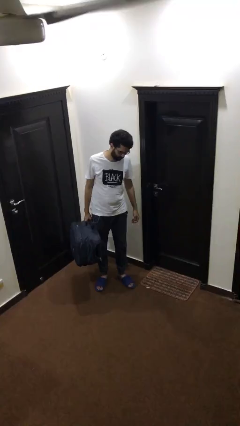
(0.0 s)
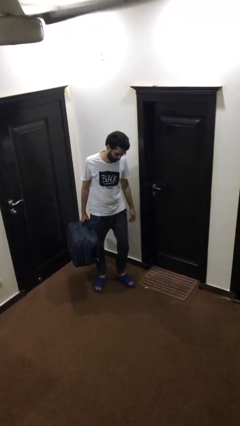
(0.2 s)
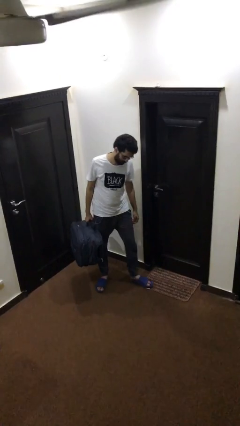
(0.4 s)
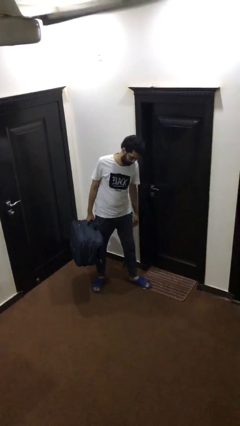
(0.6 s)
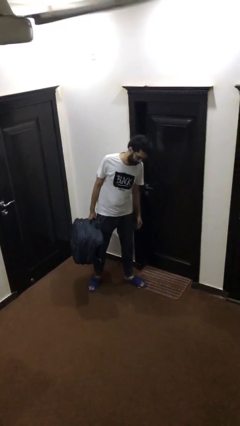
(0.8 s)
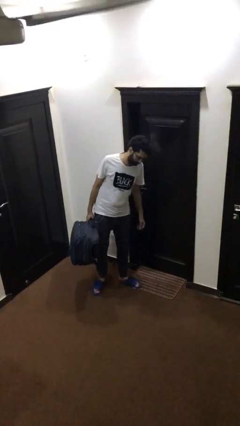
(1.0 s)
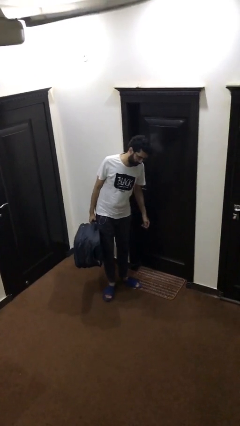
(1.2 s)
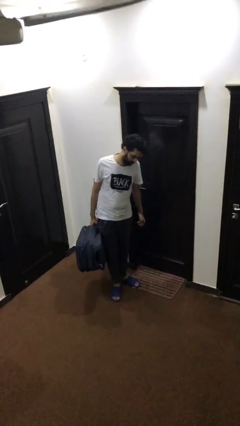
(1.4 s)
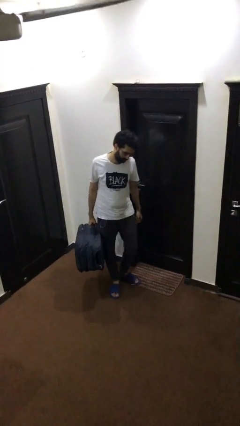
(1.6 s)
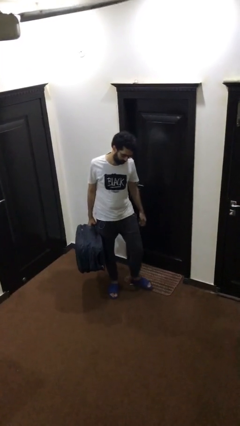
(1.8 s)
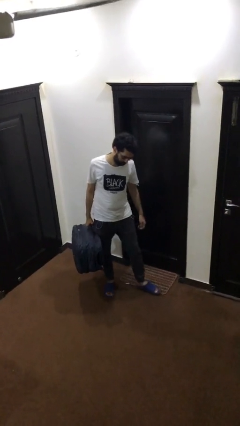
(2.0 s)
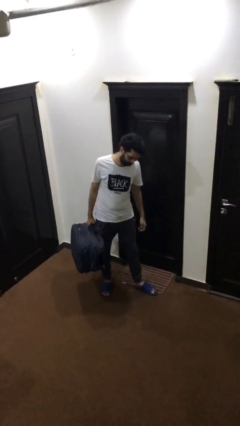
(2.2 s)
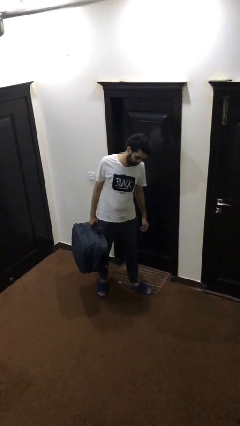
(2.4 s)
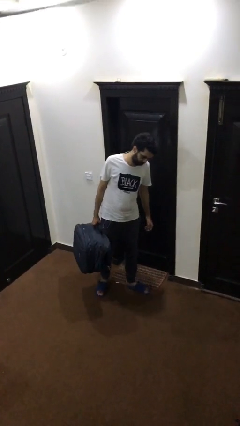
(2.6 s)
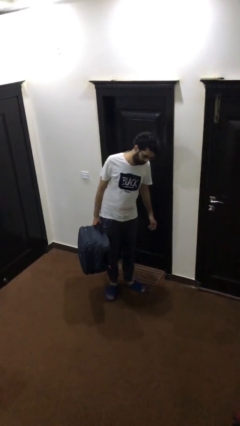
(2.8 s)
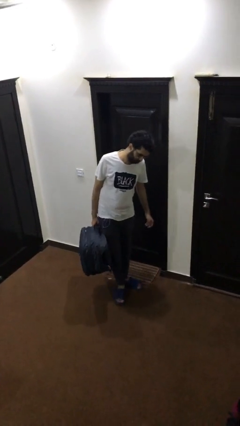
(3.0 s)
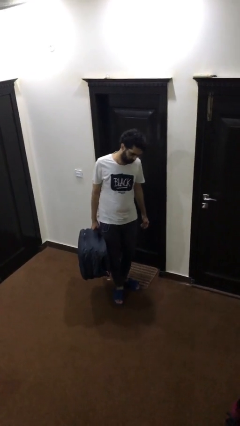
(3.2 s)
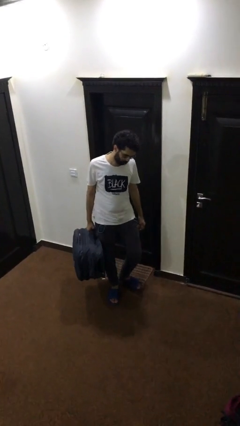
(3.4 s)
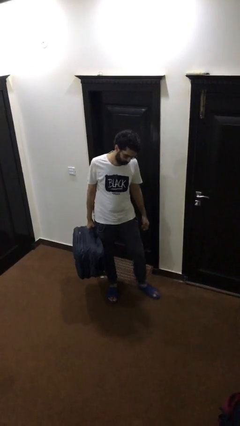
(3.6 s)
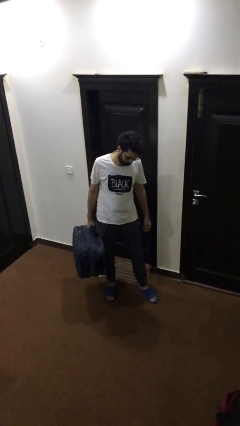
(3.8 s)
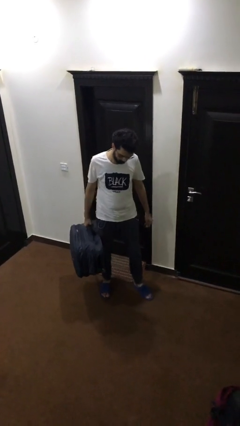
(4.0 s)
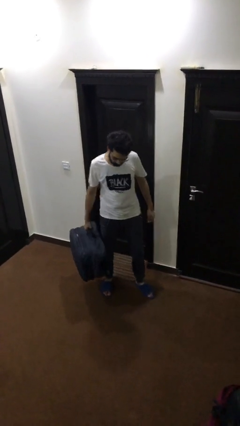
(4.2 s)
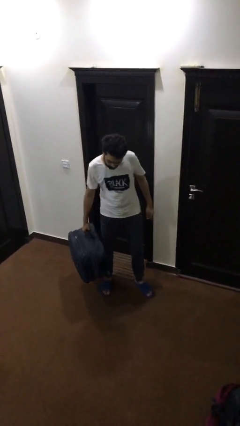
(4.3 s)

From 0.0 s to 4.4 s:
person carries heavy object

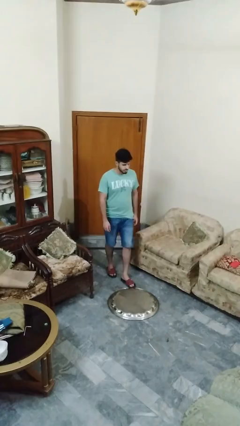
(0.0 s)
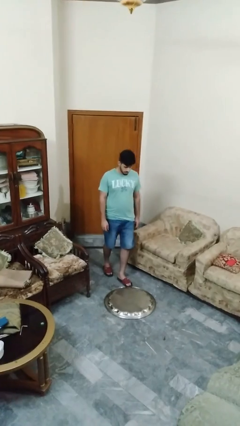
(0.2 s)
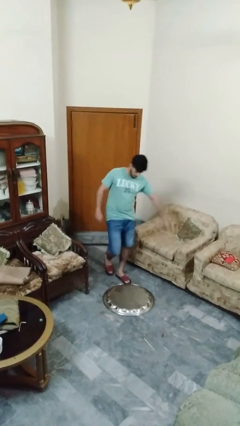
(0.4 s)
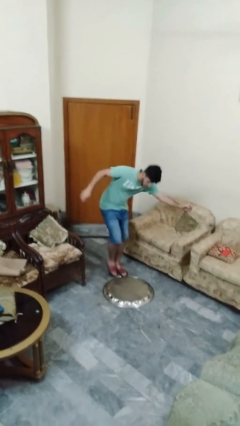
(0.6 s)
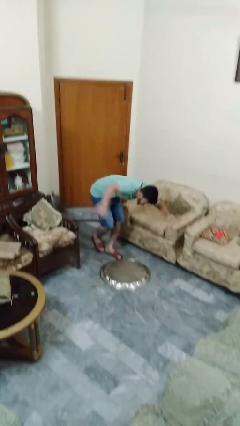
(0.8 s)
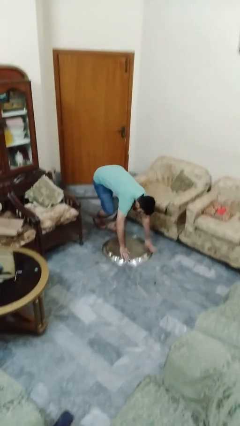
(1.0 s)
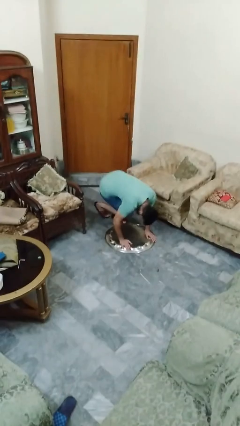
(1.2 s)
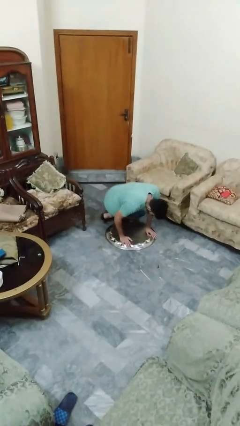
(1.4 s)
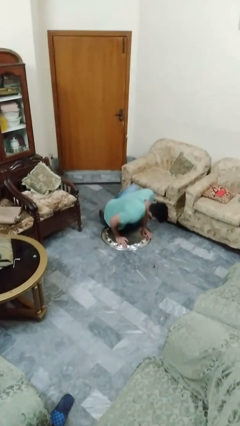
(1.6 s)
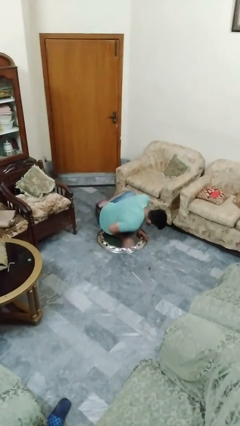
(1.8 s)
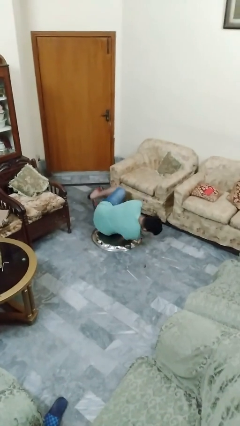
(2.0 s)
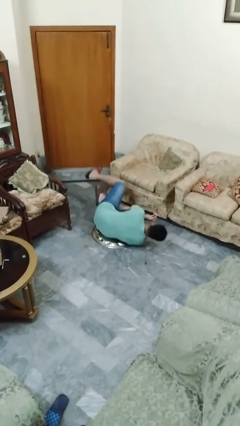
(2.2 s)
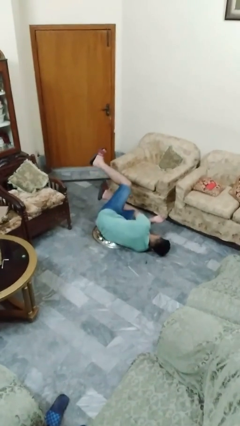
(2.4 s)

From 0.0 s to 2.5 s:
person trips on object on floor

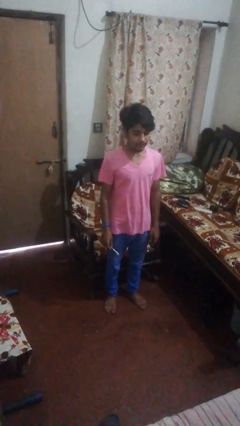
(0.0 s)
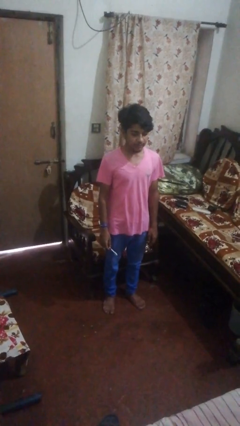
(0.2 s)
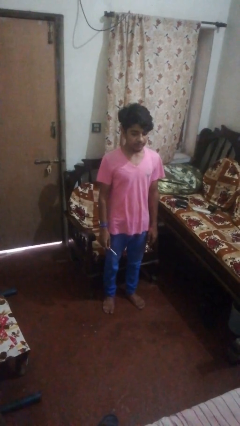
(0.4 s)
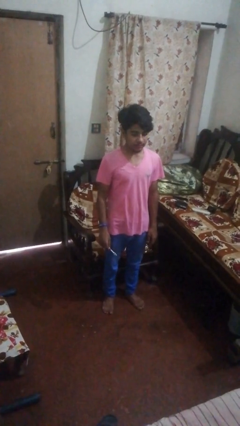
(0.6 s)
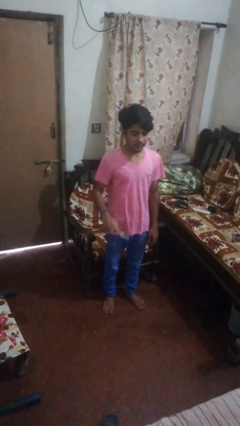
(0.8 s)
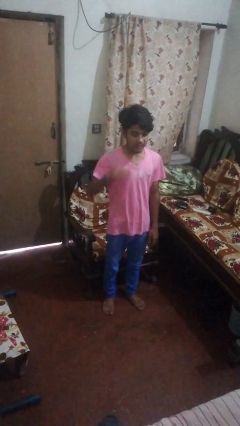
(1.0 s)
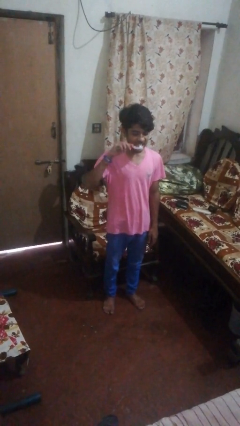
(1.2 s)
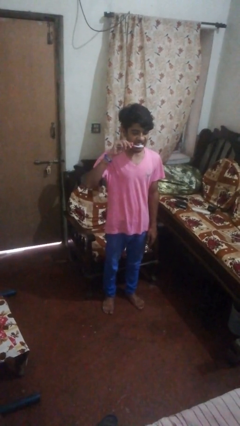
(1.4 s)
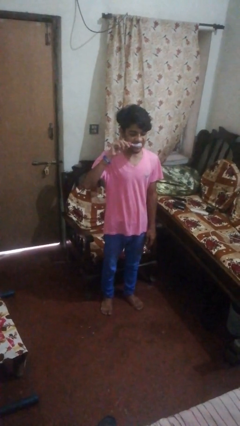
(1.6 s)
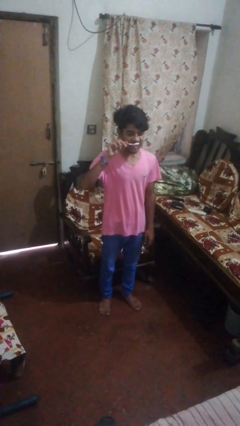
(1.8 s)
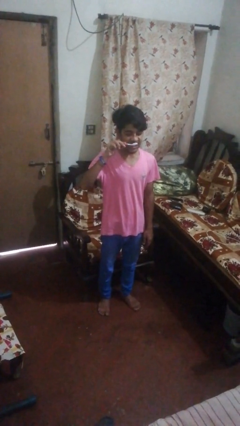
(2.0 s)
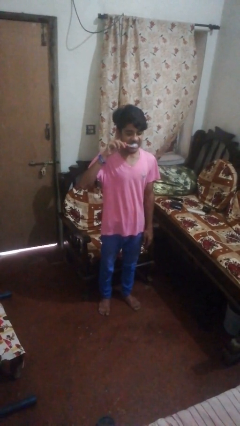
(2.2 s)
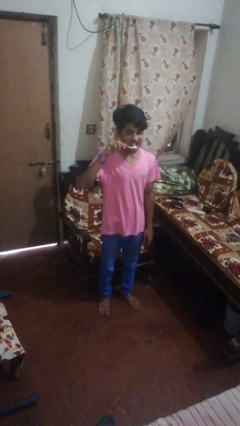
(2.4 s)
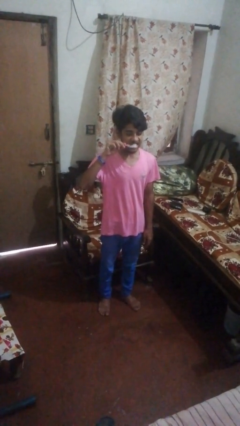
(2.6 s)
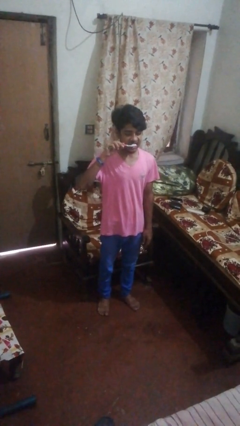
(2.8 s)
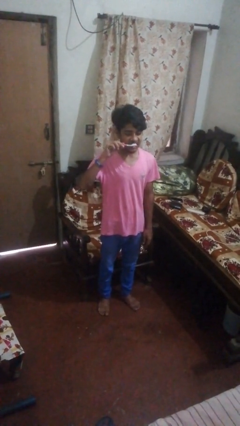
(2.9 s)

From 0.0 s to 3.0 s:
person brushes teeth

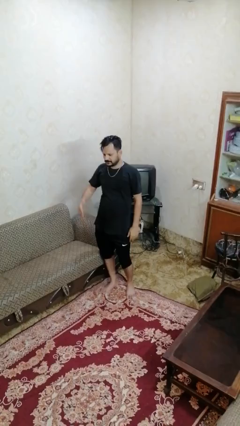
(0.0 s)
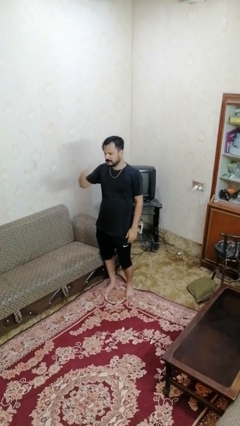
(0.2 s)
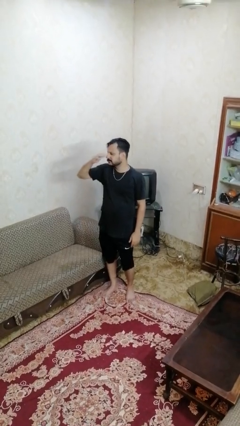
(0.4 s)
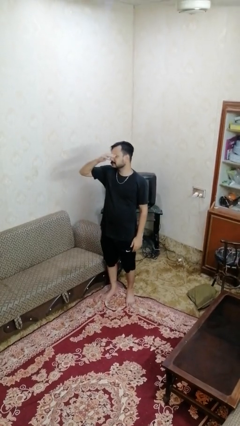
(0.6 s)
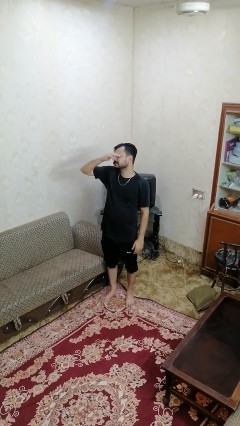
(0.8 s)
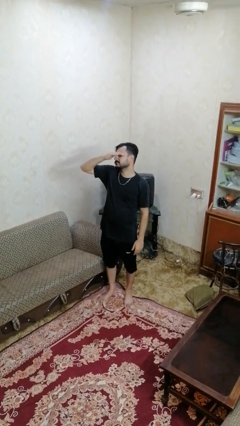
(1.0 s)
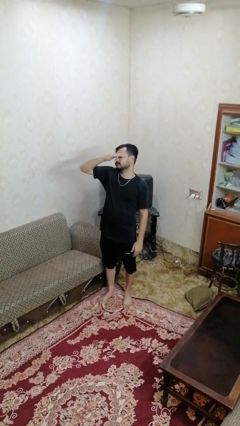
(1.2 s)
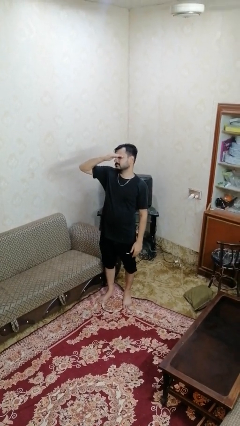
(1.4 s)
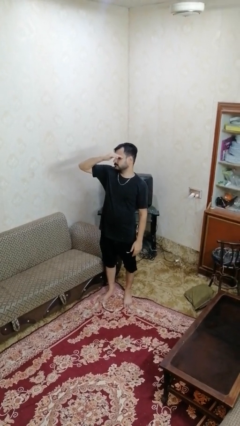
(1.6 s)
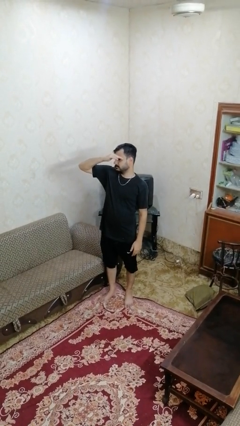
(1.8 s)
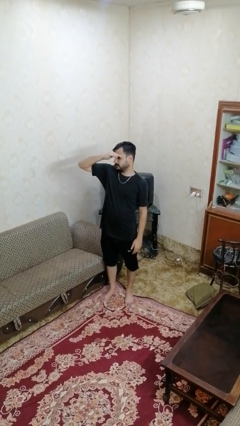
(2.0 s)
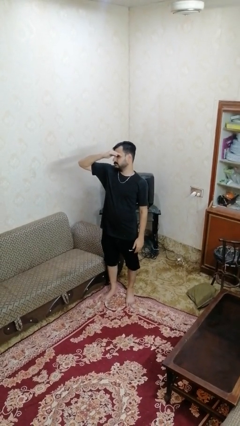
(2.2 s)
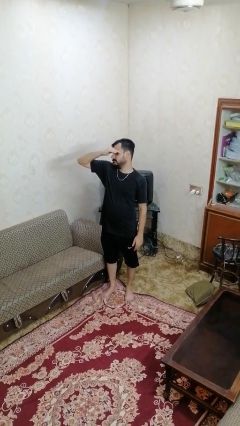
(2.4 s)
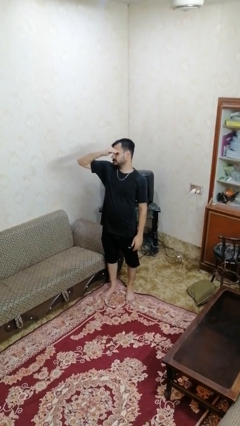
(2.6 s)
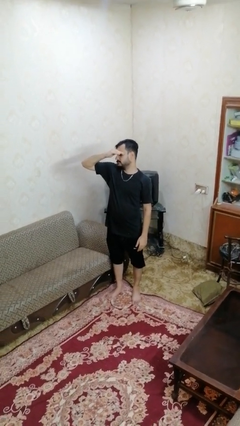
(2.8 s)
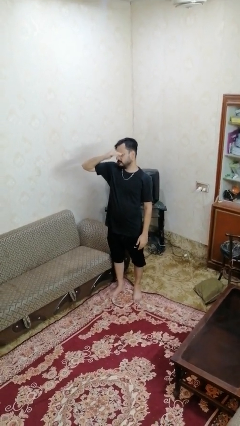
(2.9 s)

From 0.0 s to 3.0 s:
person shades eyes

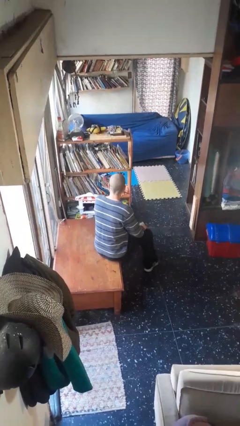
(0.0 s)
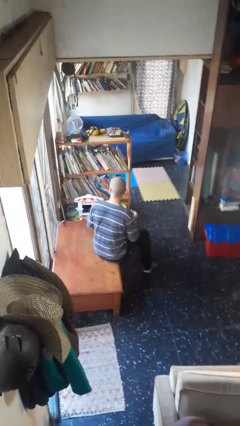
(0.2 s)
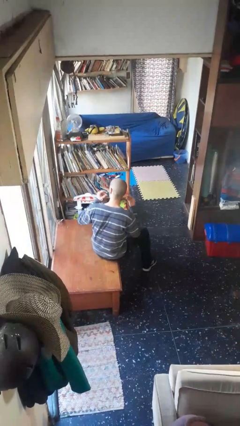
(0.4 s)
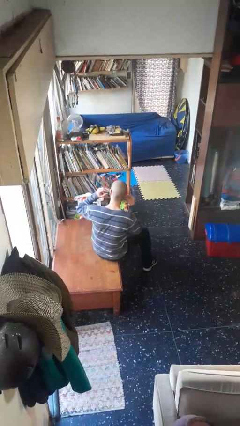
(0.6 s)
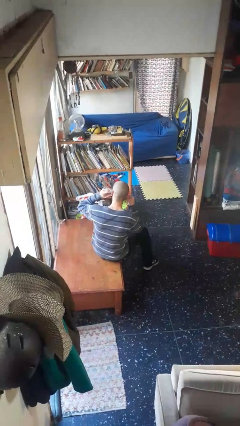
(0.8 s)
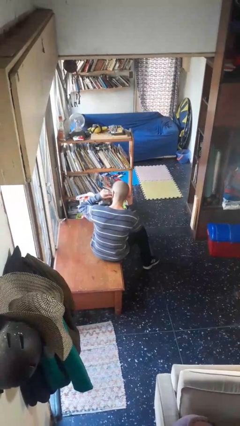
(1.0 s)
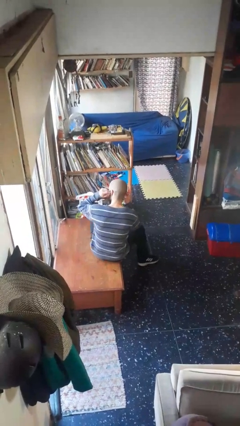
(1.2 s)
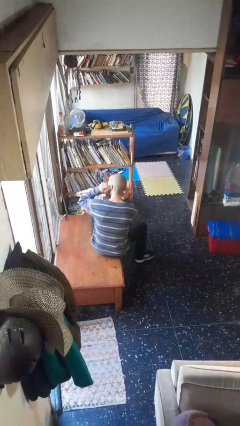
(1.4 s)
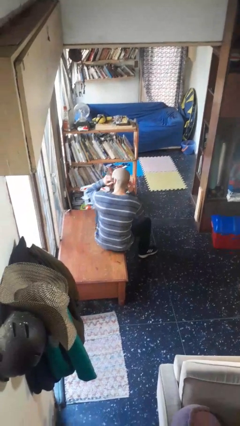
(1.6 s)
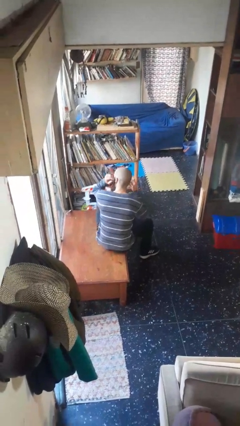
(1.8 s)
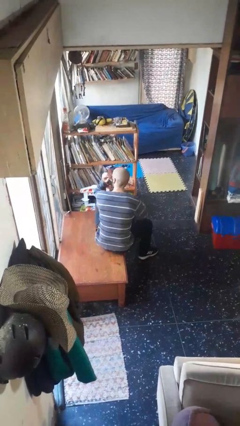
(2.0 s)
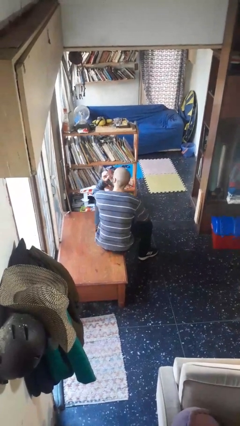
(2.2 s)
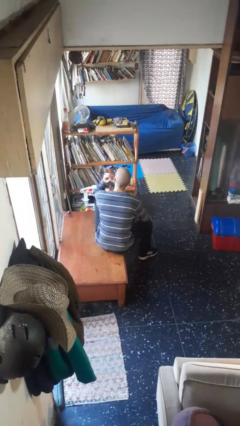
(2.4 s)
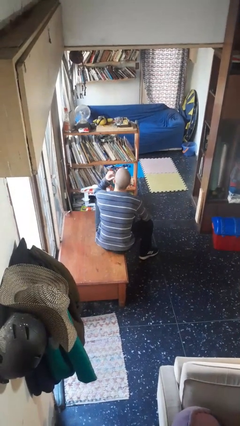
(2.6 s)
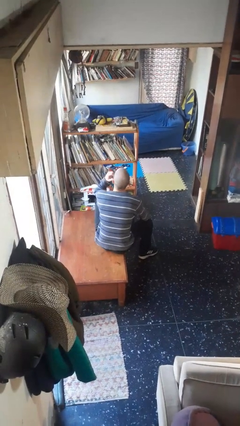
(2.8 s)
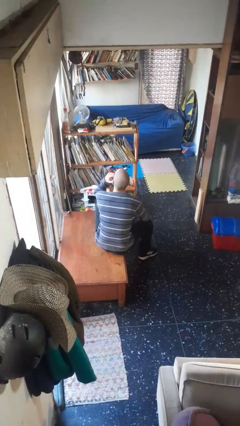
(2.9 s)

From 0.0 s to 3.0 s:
person puts on headphones

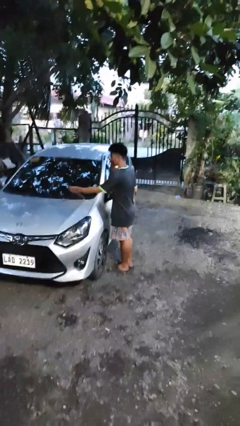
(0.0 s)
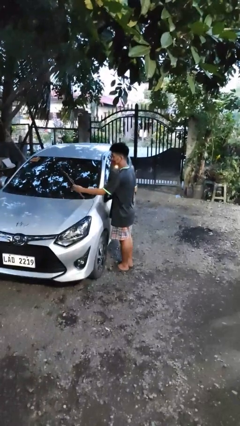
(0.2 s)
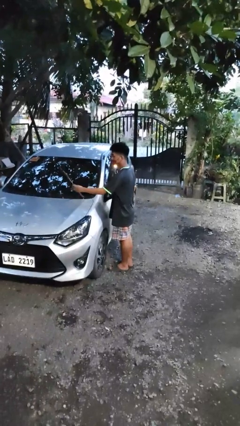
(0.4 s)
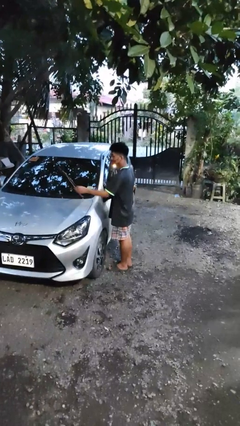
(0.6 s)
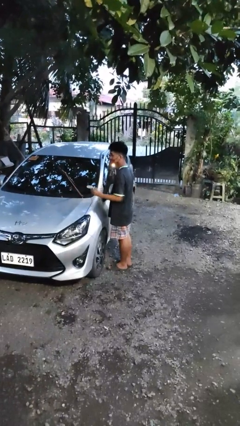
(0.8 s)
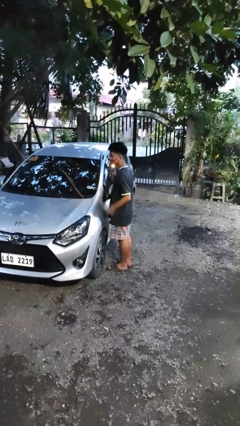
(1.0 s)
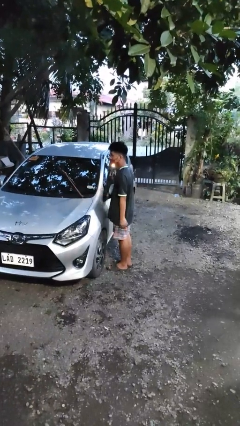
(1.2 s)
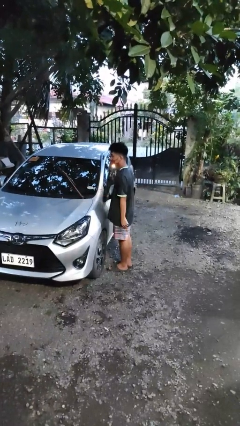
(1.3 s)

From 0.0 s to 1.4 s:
person flips up car wipers

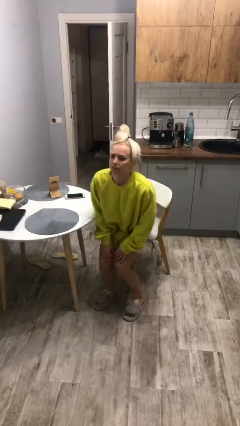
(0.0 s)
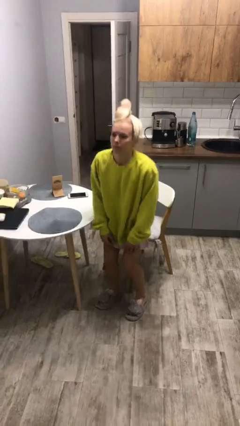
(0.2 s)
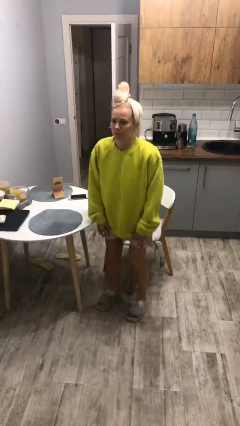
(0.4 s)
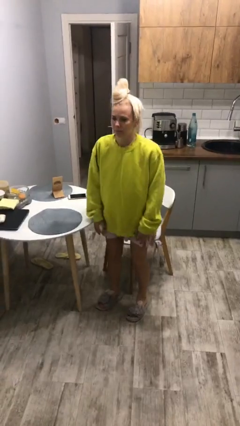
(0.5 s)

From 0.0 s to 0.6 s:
person stands up
